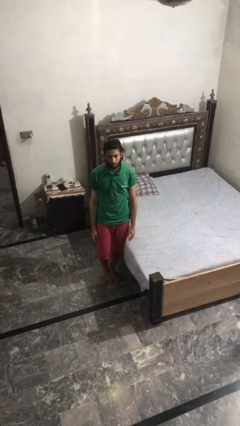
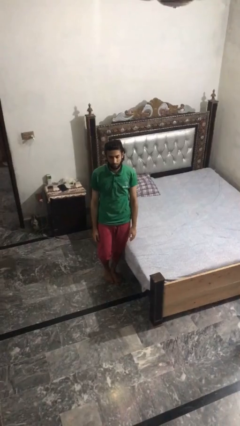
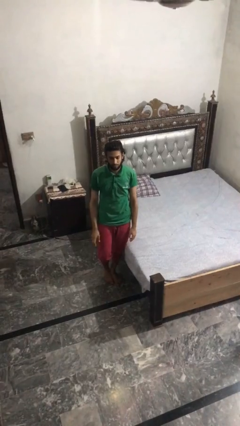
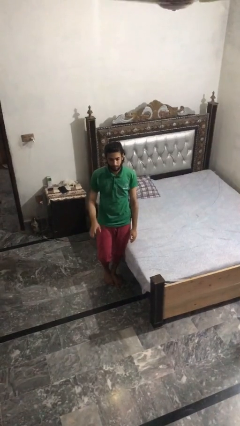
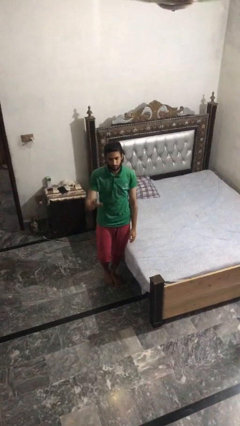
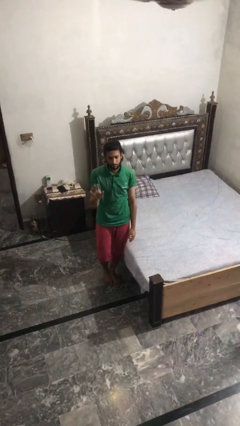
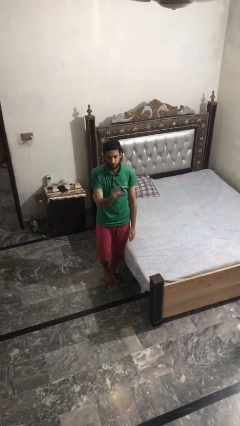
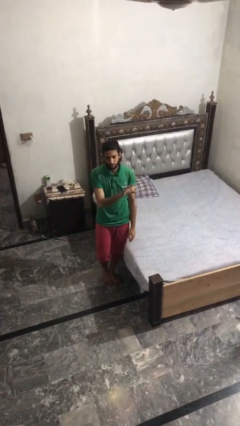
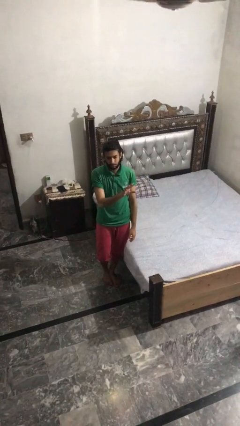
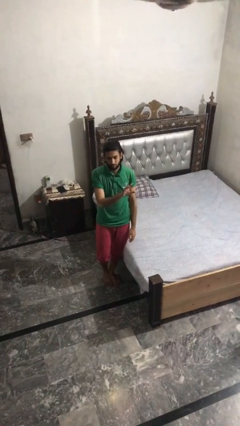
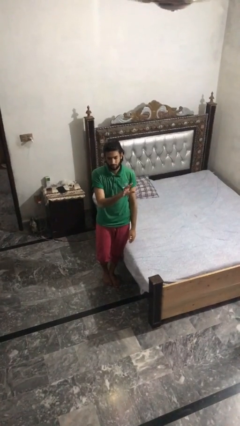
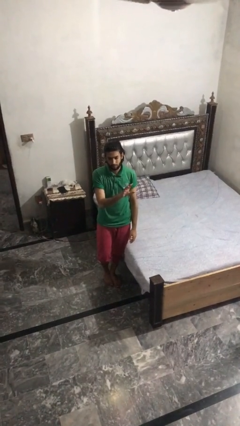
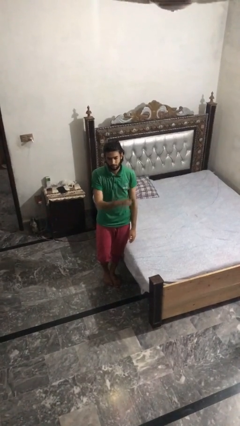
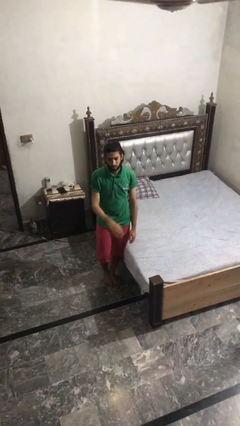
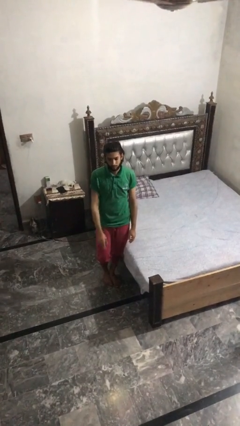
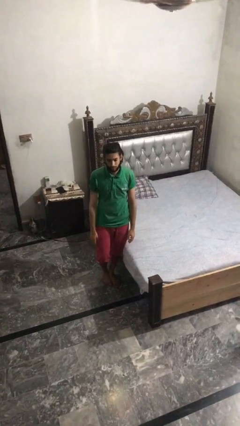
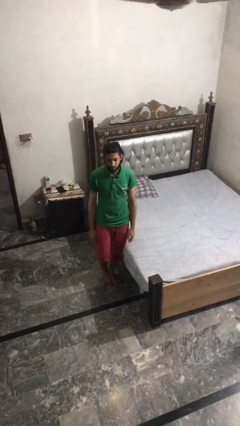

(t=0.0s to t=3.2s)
person gestures swipe left

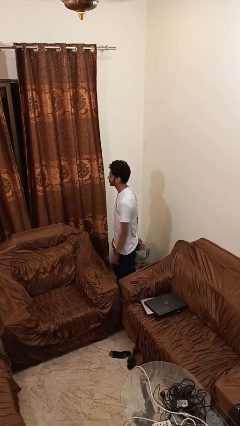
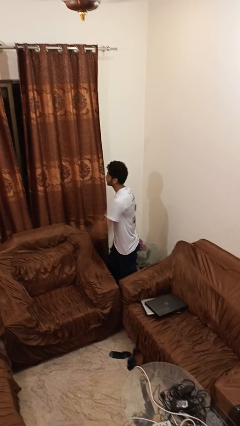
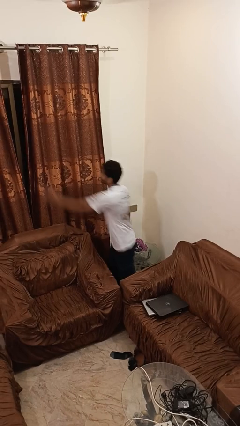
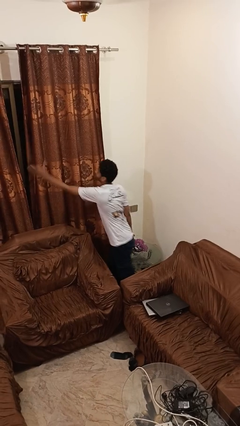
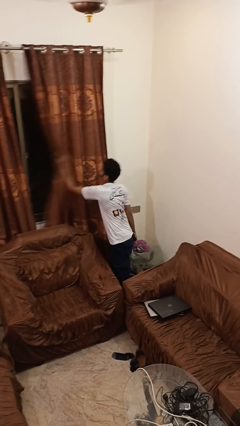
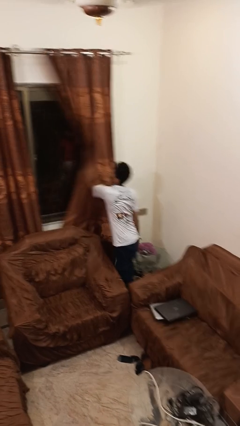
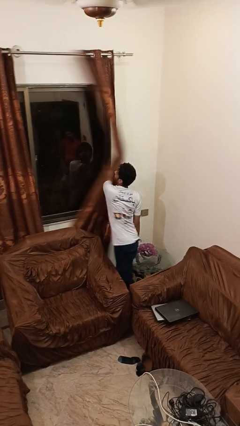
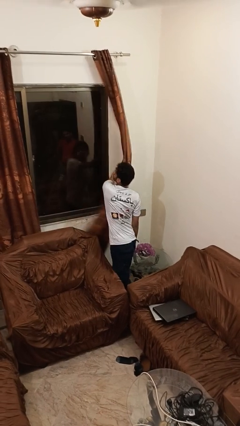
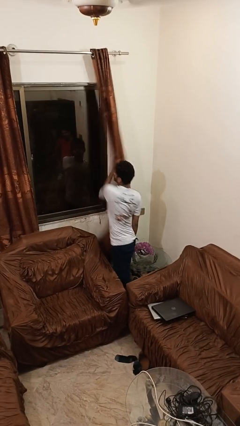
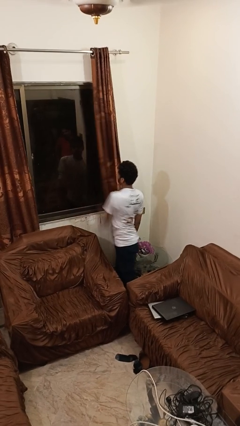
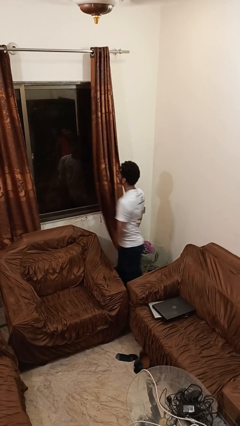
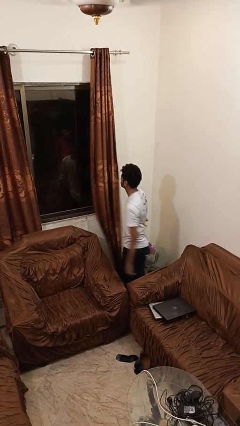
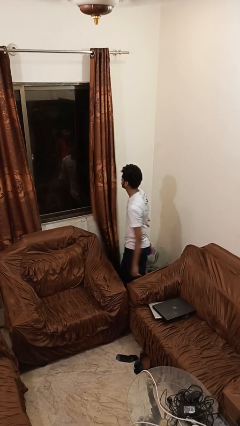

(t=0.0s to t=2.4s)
person opens curtains

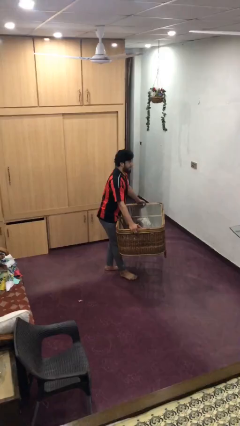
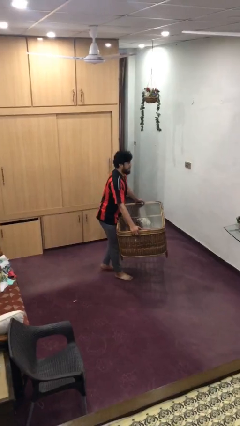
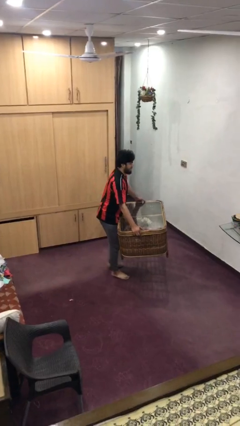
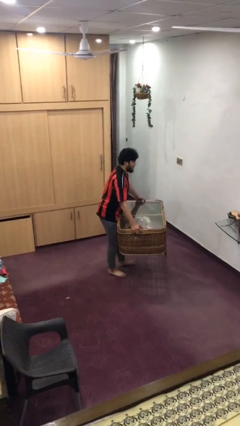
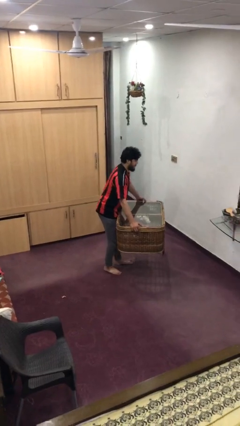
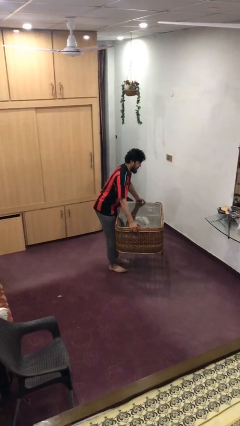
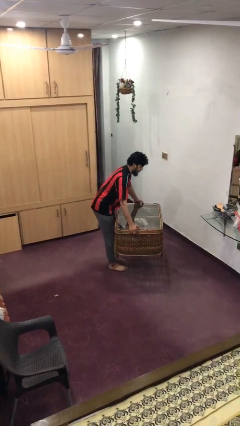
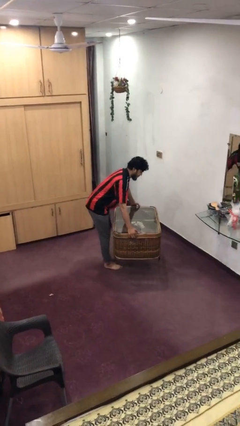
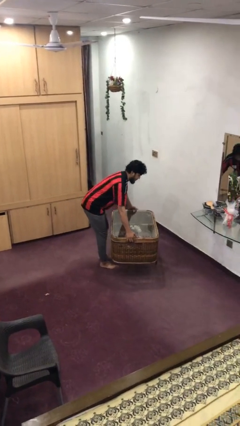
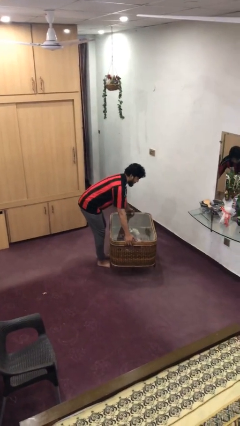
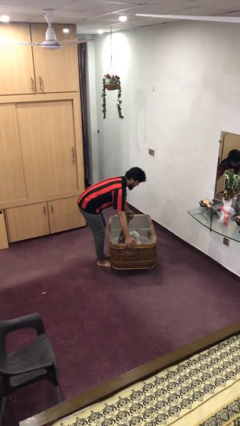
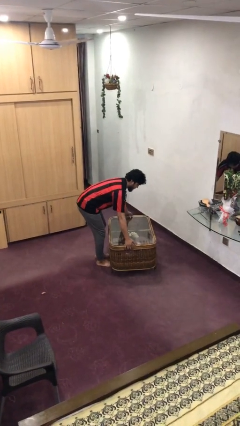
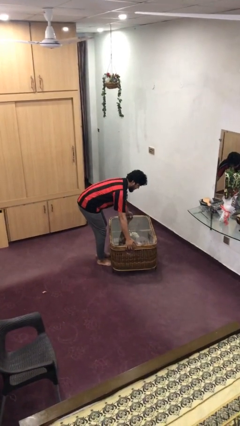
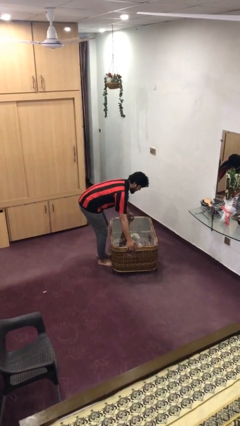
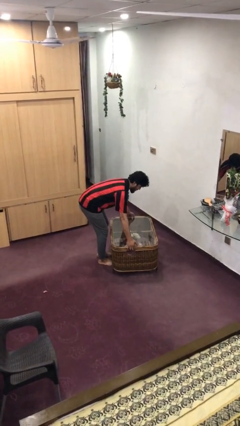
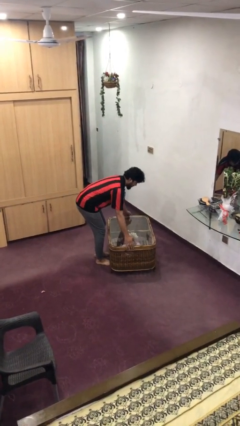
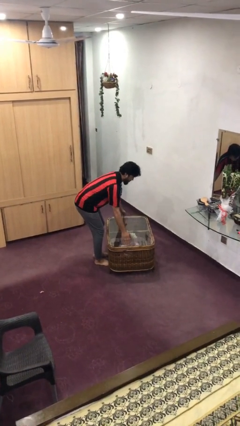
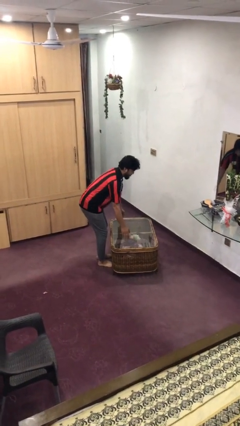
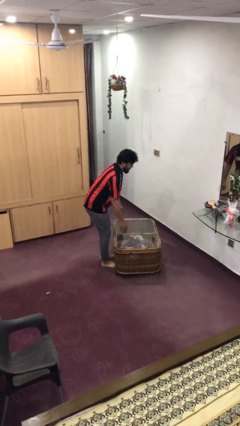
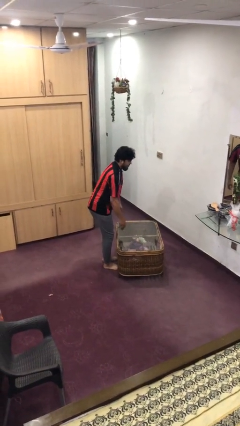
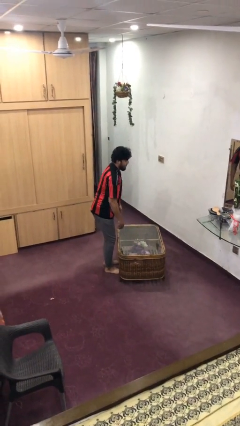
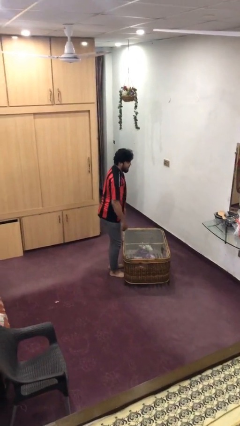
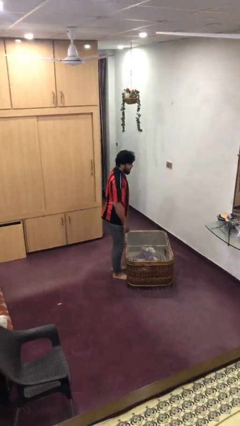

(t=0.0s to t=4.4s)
person puts down object on floor

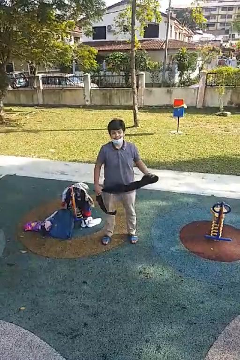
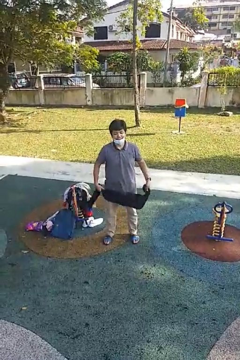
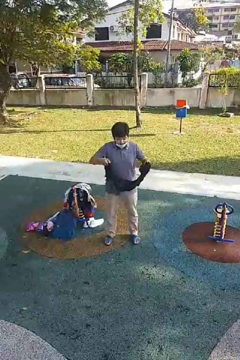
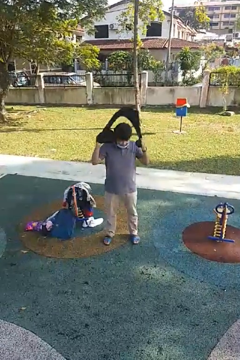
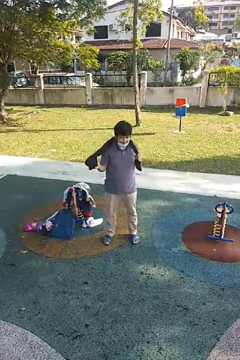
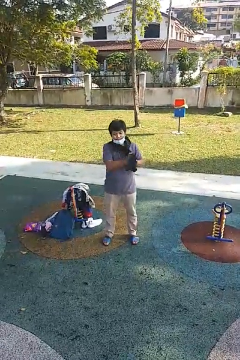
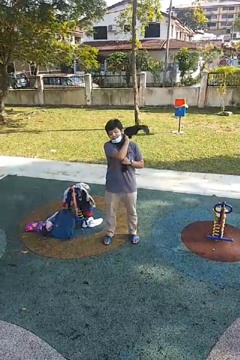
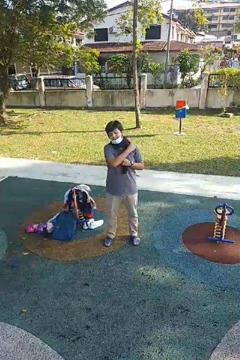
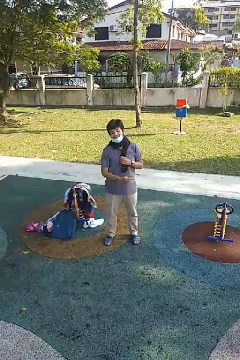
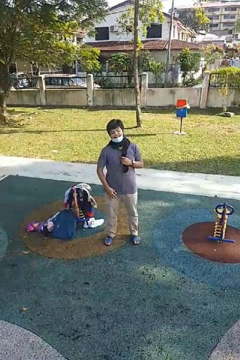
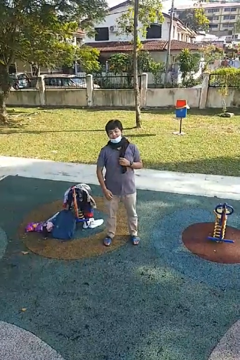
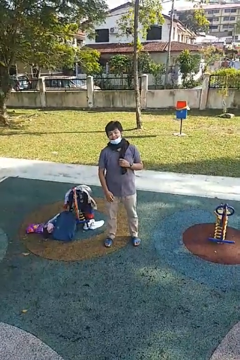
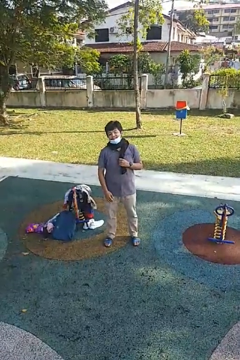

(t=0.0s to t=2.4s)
person puts on scarf

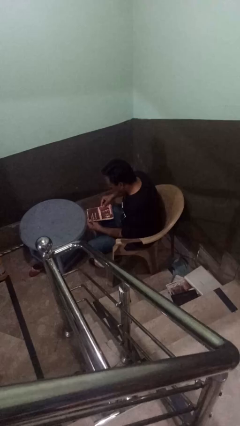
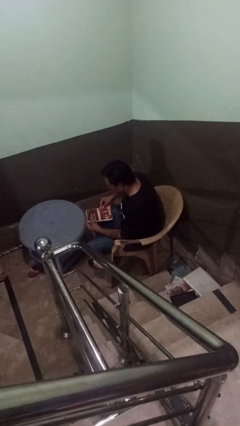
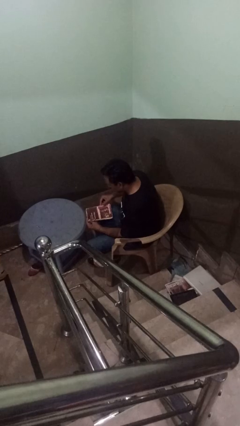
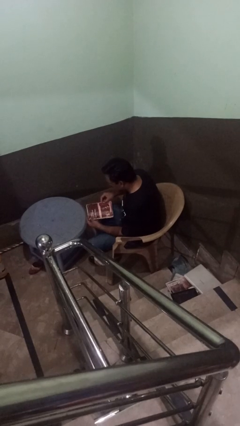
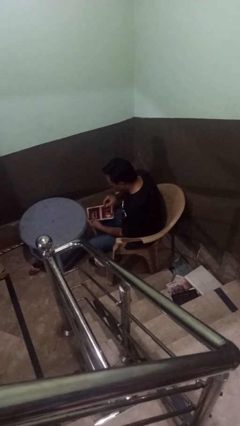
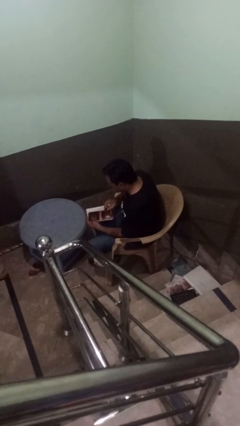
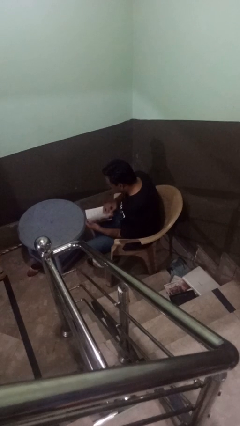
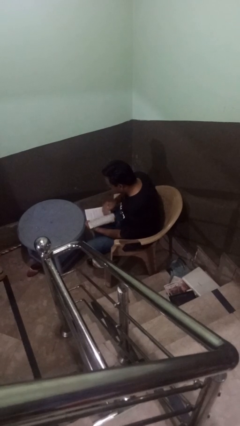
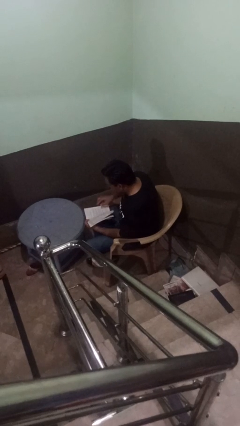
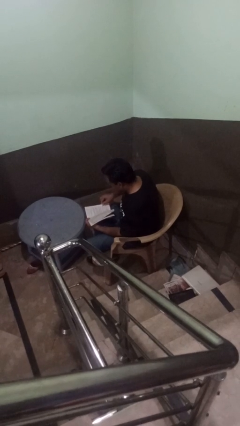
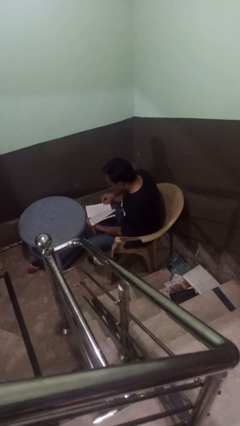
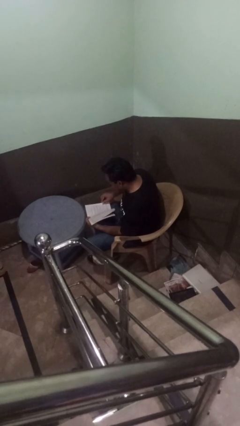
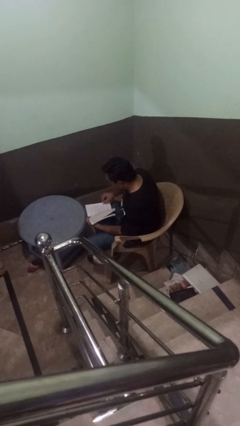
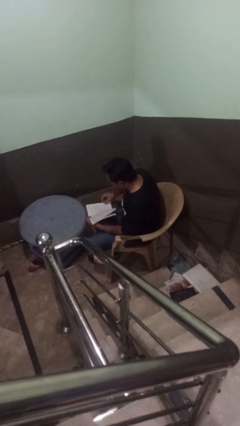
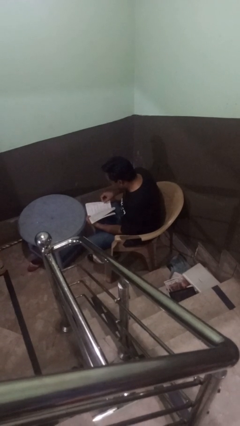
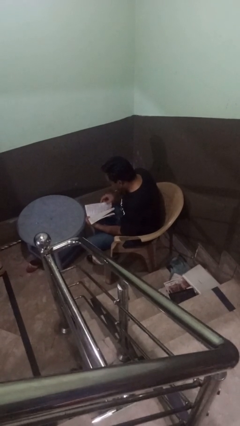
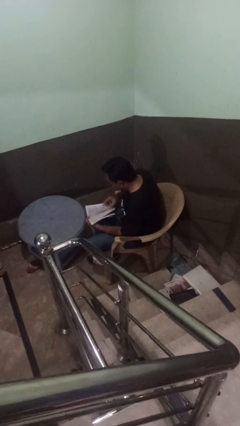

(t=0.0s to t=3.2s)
person reads book

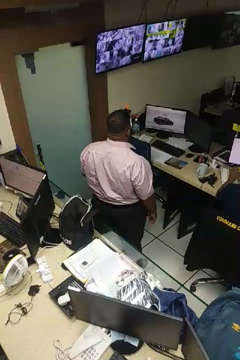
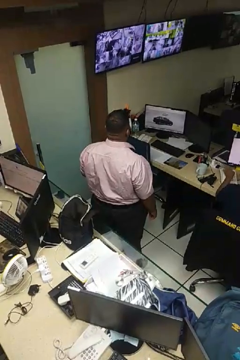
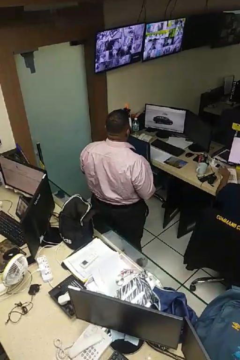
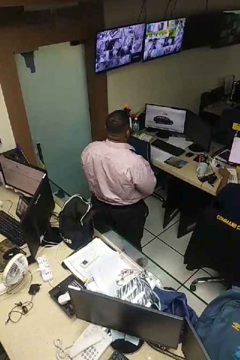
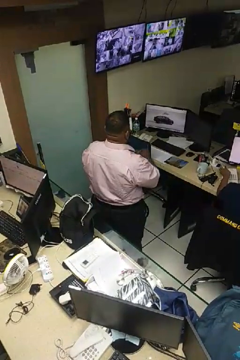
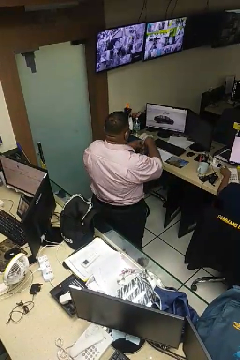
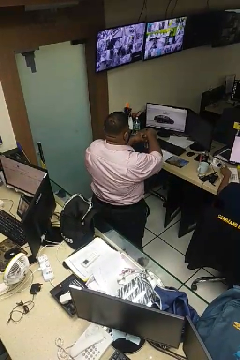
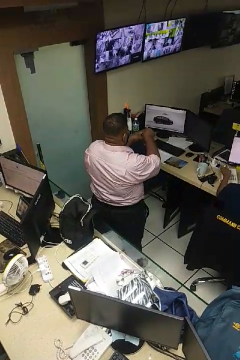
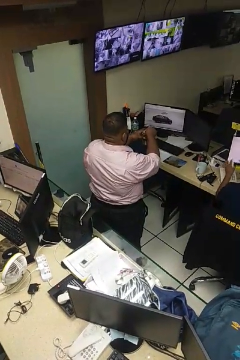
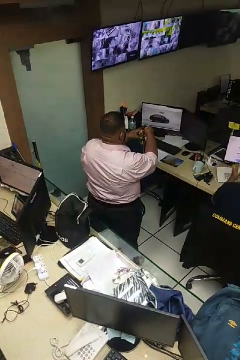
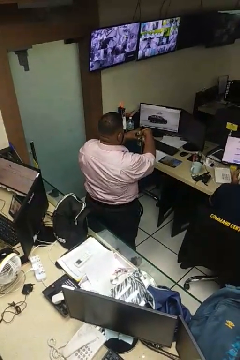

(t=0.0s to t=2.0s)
person opens beverage can

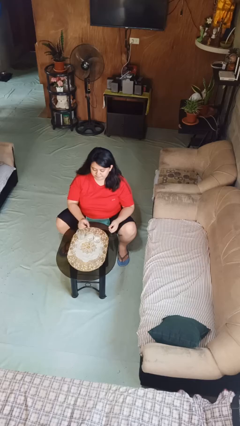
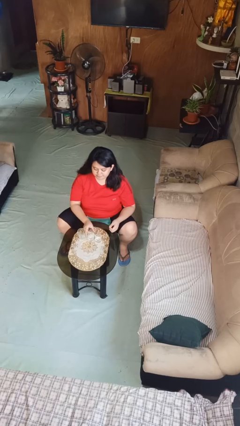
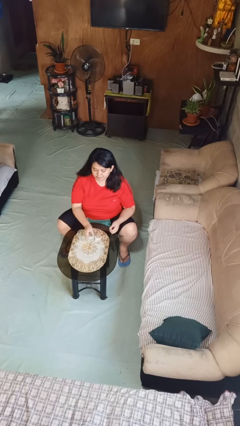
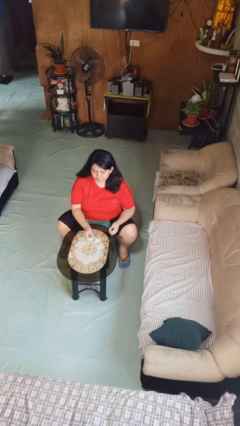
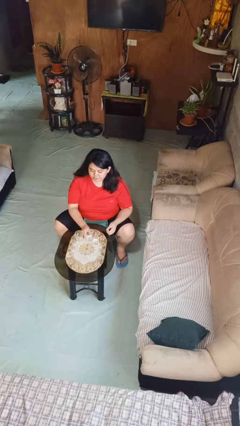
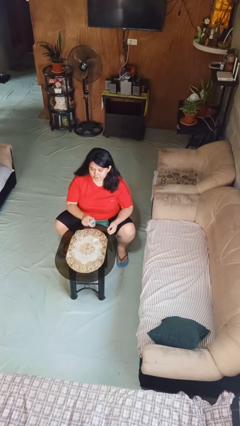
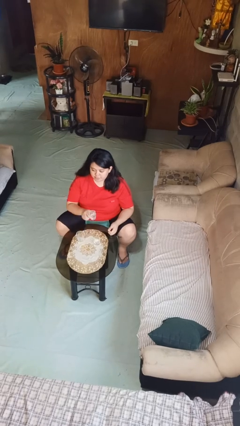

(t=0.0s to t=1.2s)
person picks up object from table
